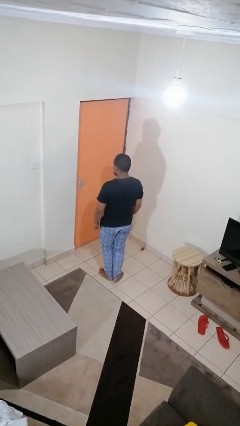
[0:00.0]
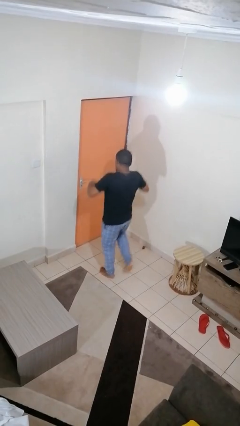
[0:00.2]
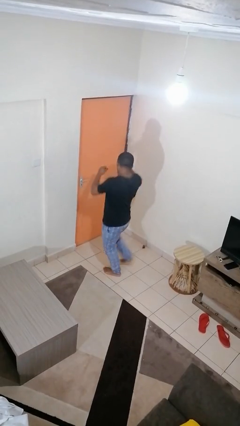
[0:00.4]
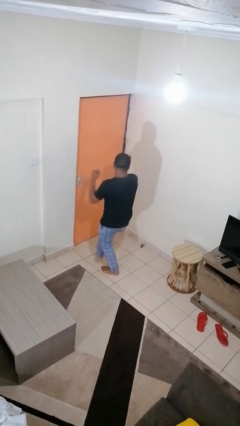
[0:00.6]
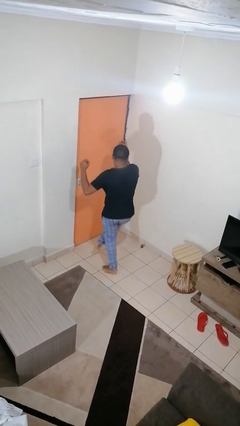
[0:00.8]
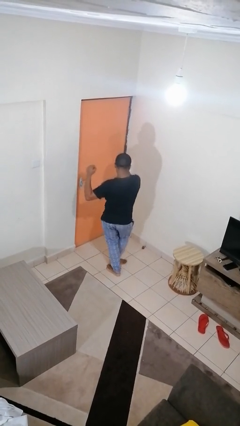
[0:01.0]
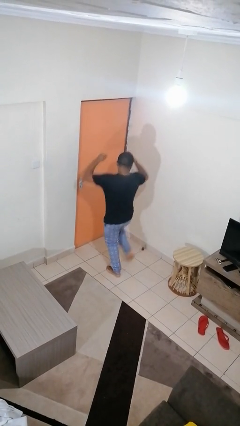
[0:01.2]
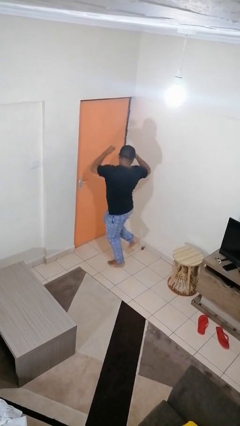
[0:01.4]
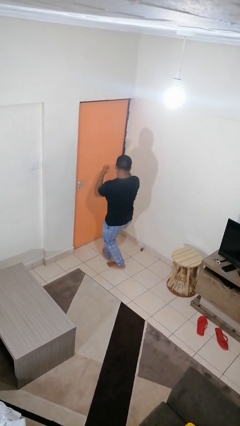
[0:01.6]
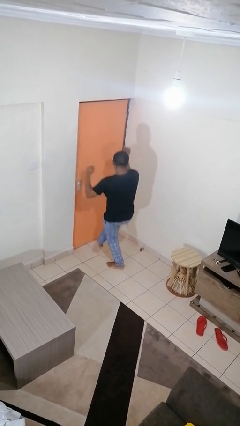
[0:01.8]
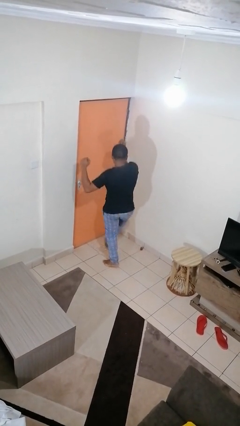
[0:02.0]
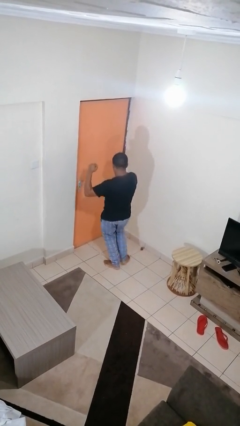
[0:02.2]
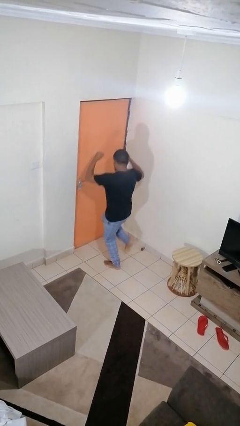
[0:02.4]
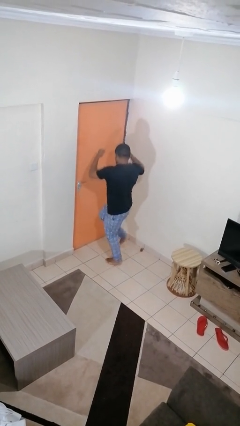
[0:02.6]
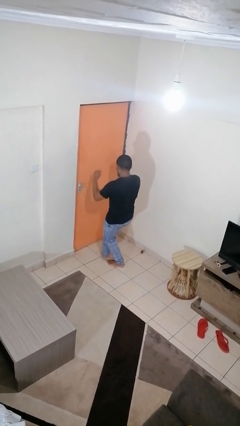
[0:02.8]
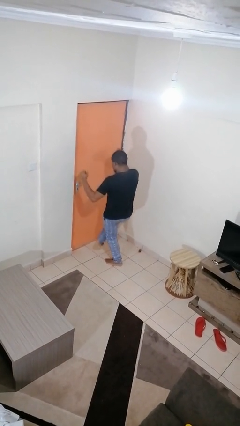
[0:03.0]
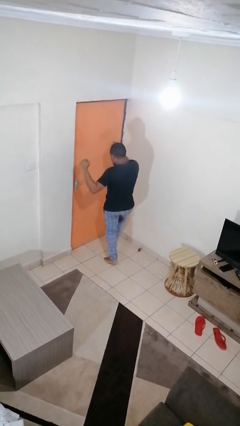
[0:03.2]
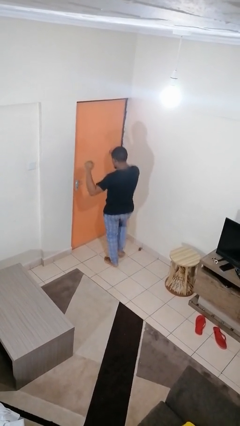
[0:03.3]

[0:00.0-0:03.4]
person dances in place

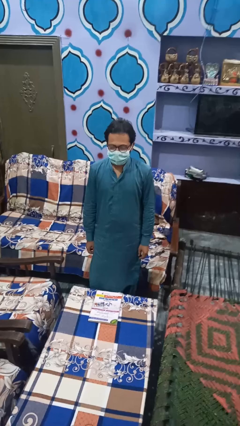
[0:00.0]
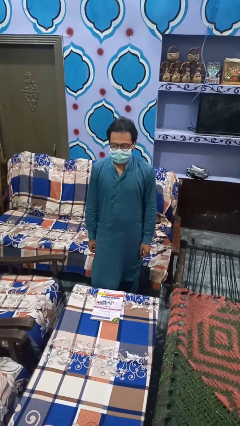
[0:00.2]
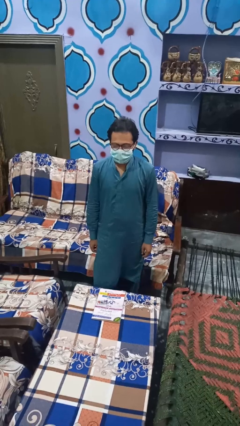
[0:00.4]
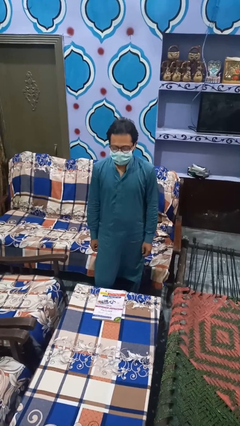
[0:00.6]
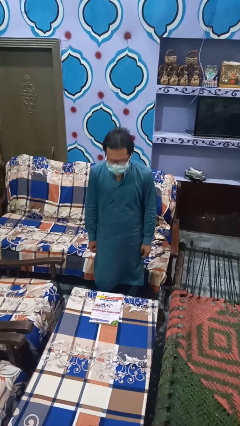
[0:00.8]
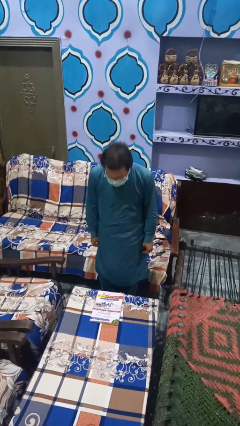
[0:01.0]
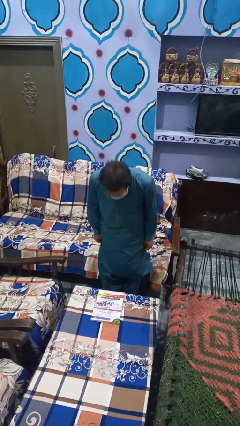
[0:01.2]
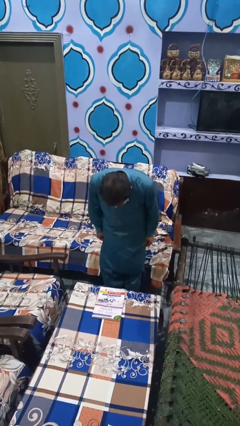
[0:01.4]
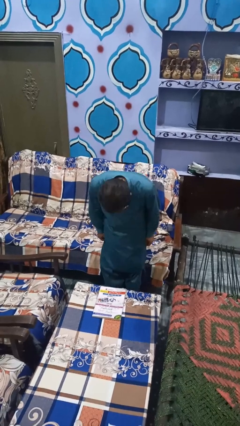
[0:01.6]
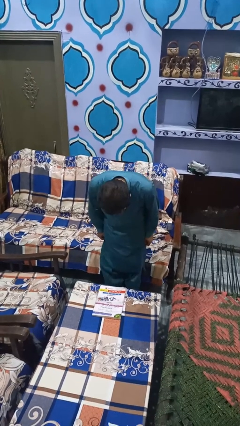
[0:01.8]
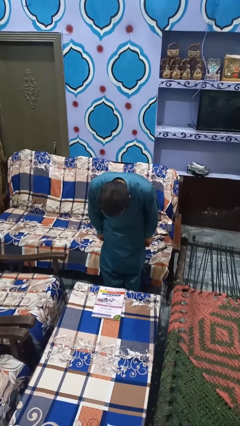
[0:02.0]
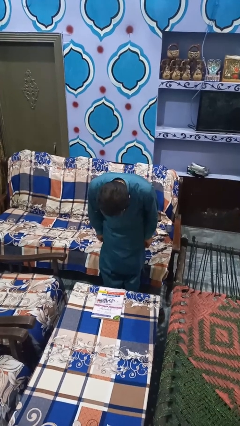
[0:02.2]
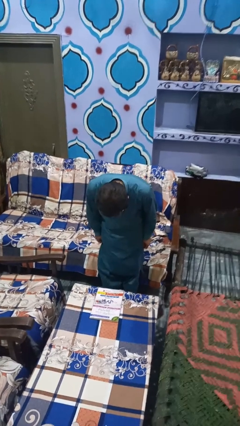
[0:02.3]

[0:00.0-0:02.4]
person bows

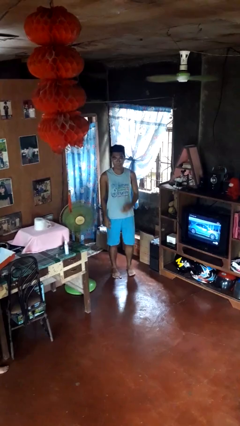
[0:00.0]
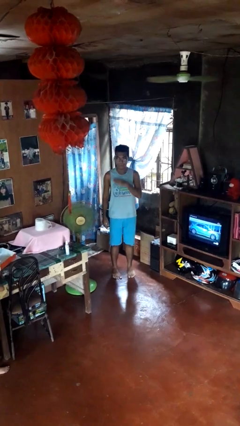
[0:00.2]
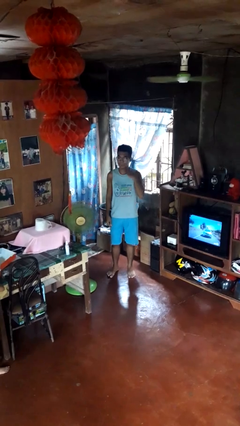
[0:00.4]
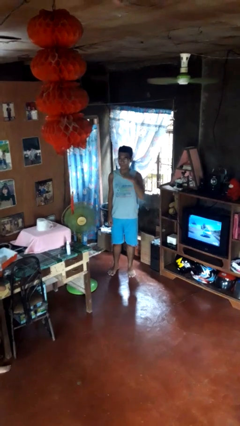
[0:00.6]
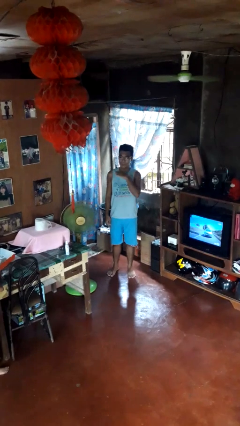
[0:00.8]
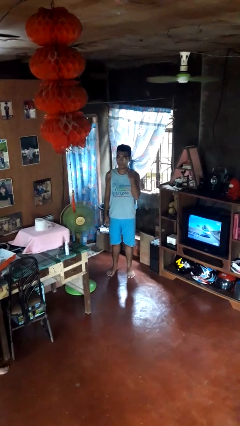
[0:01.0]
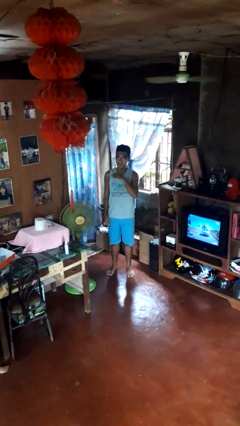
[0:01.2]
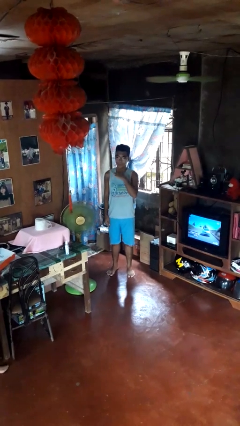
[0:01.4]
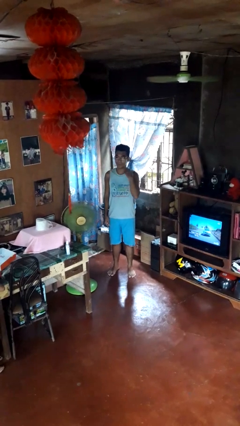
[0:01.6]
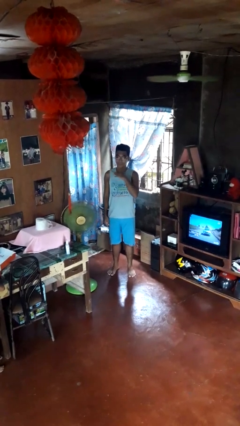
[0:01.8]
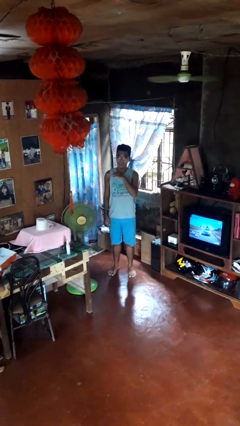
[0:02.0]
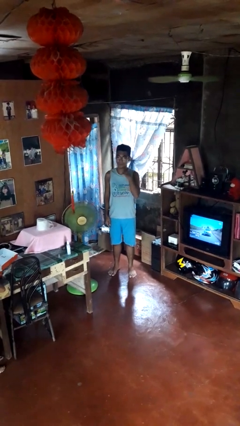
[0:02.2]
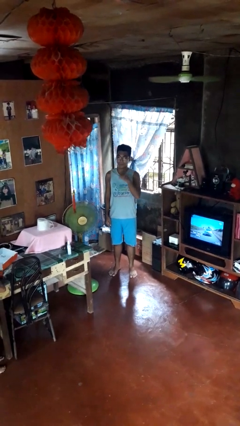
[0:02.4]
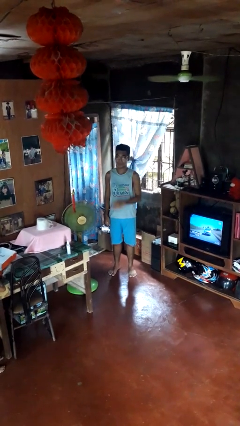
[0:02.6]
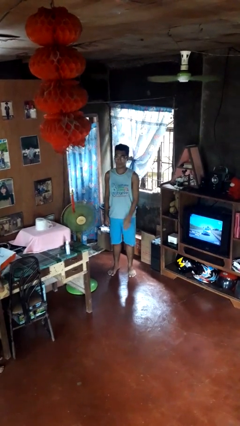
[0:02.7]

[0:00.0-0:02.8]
person gestures cut

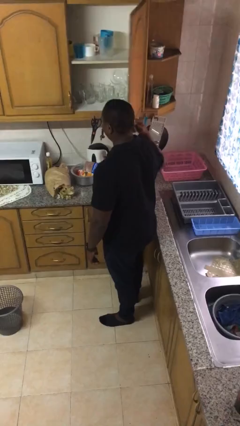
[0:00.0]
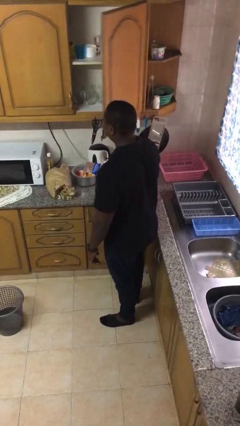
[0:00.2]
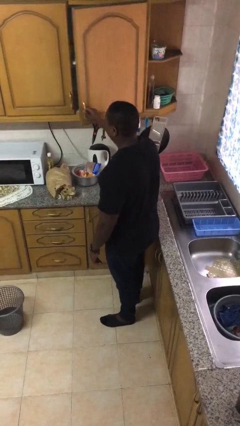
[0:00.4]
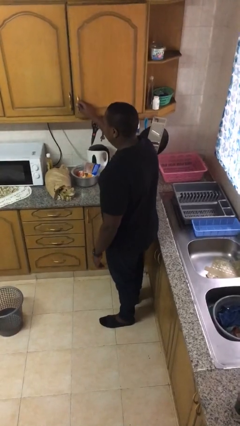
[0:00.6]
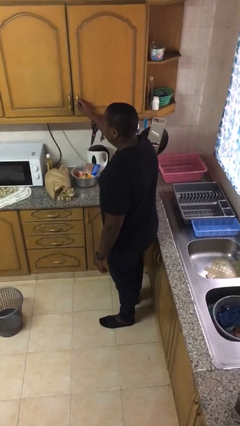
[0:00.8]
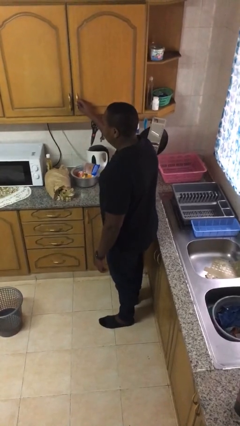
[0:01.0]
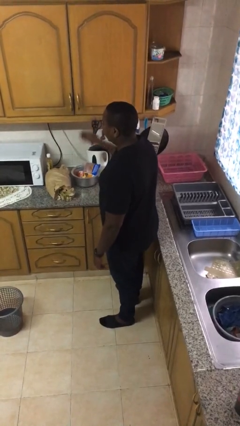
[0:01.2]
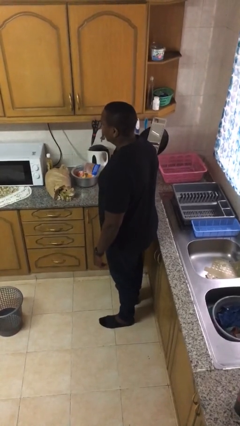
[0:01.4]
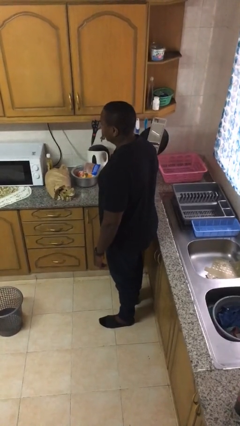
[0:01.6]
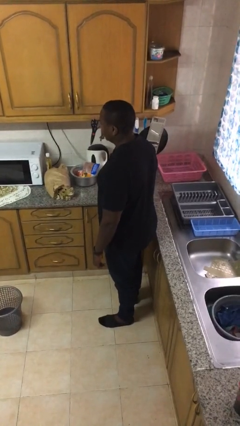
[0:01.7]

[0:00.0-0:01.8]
person closes cabinet

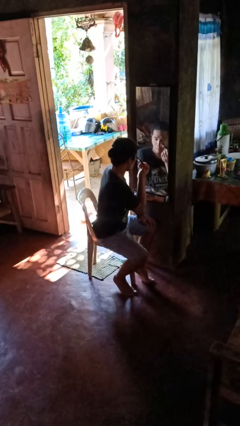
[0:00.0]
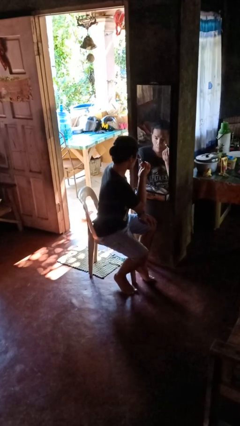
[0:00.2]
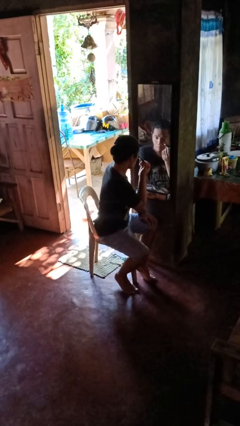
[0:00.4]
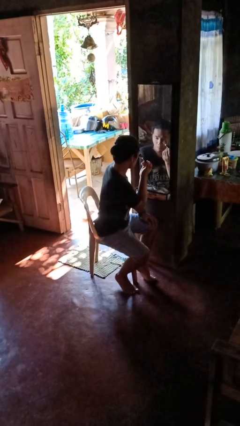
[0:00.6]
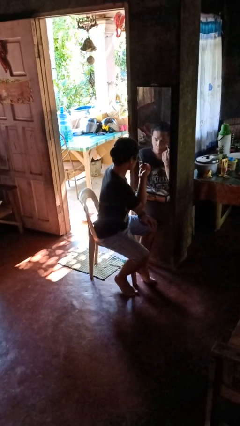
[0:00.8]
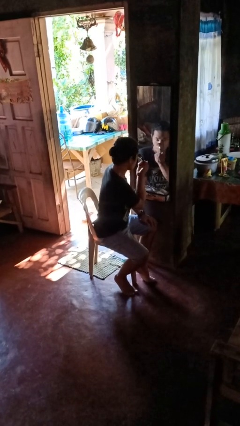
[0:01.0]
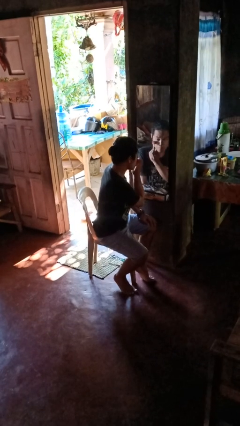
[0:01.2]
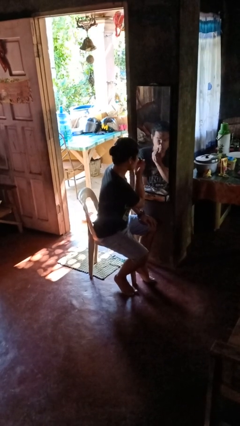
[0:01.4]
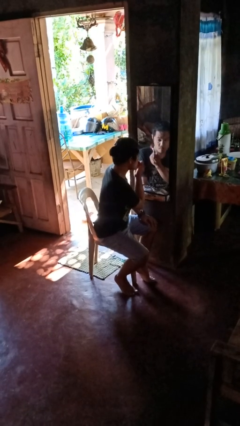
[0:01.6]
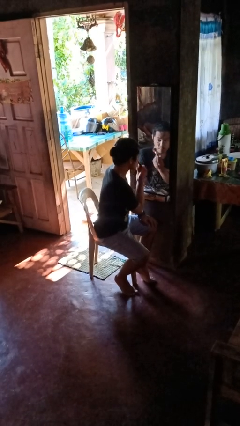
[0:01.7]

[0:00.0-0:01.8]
person applies eye makeup

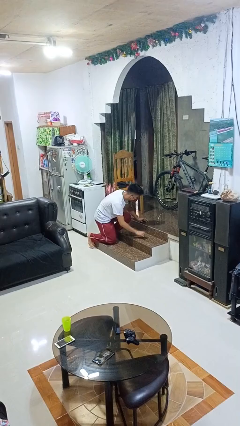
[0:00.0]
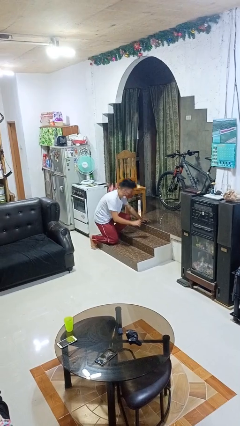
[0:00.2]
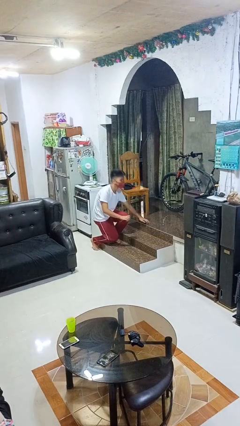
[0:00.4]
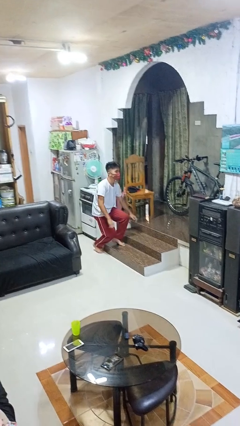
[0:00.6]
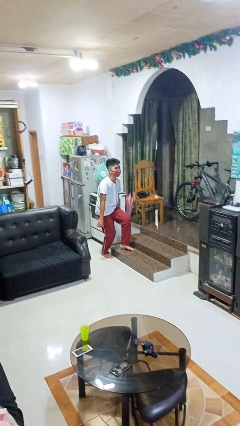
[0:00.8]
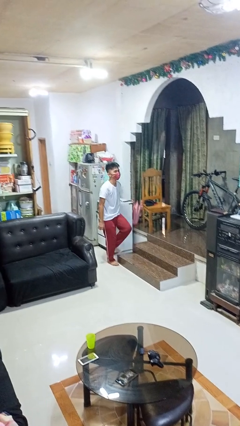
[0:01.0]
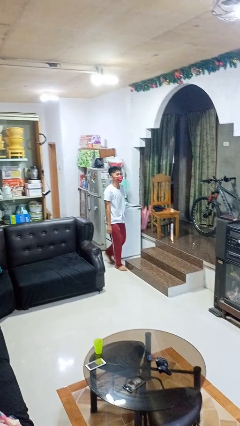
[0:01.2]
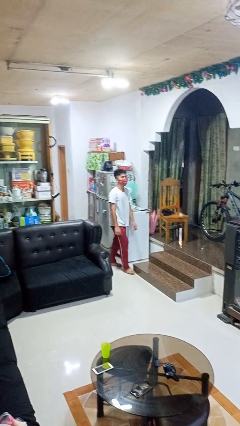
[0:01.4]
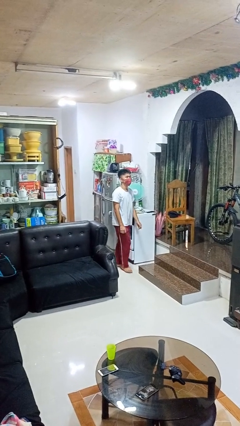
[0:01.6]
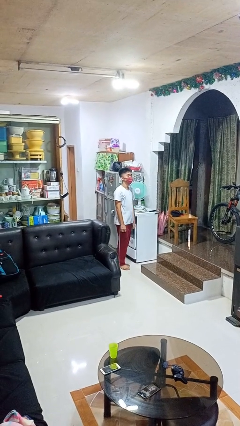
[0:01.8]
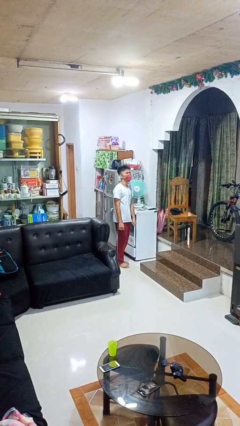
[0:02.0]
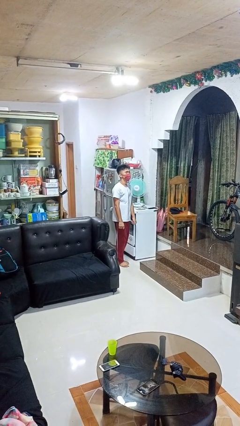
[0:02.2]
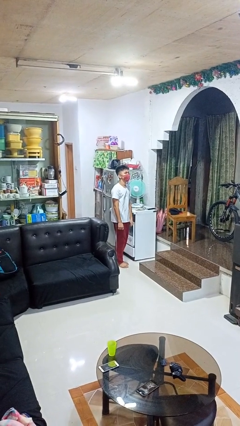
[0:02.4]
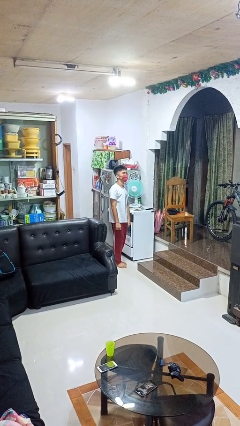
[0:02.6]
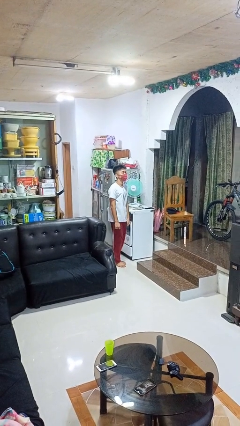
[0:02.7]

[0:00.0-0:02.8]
person stands up from floor

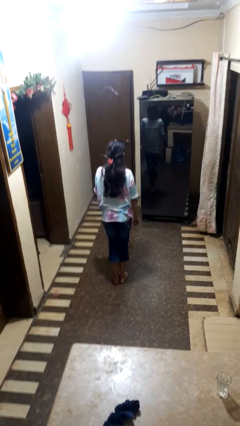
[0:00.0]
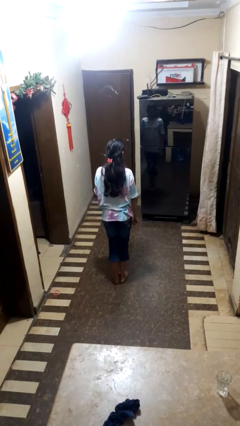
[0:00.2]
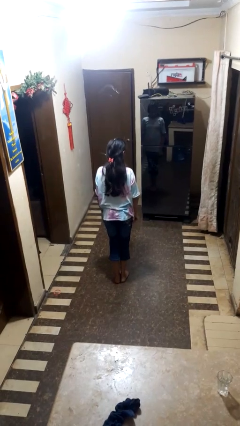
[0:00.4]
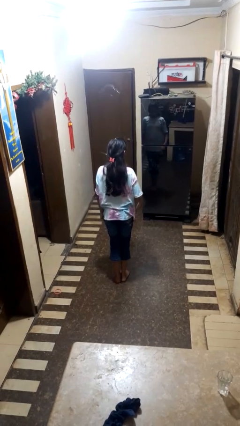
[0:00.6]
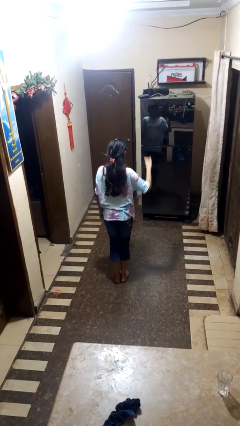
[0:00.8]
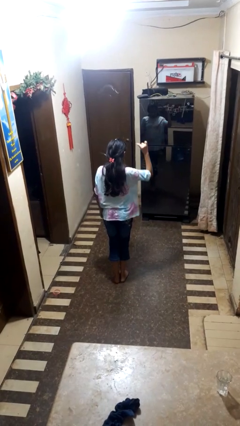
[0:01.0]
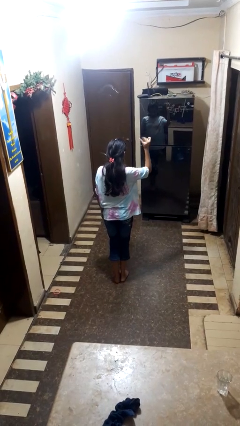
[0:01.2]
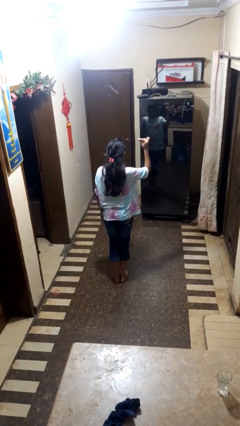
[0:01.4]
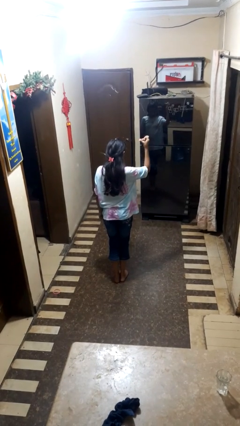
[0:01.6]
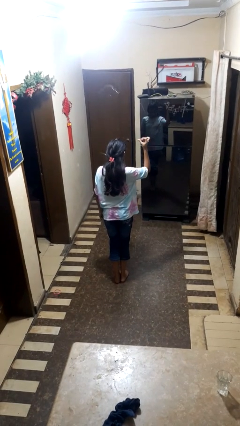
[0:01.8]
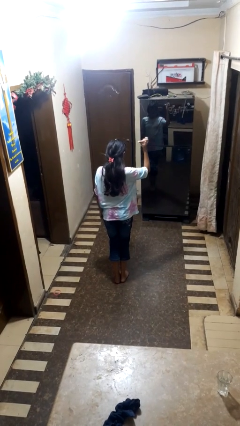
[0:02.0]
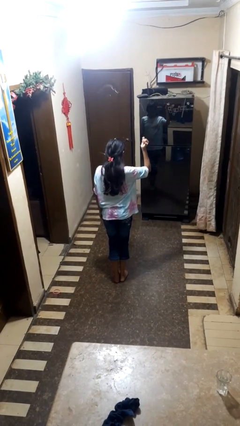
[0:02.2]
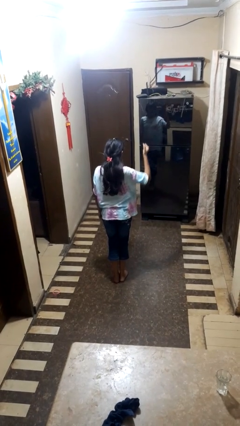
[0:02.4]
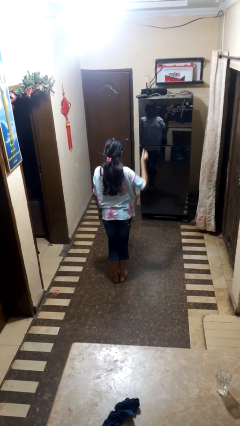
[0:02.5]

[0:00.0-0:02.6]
person snaps fingers
